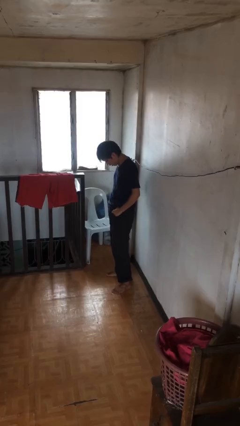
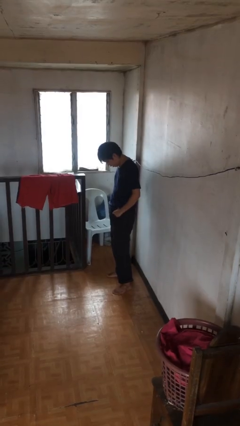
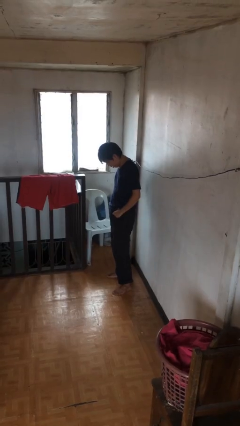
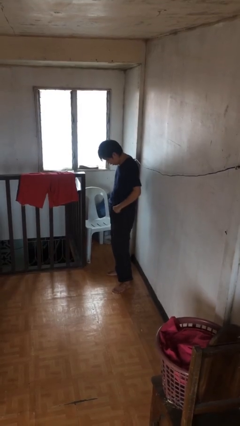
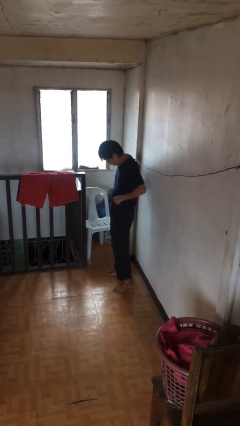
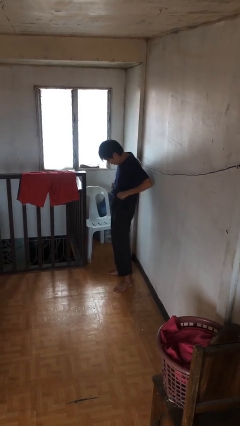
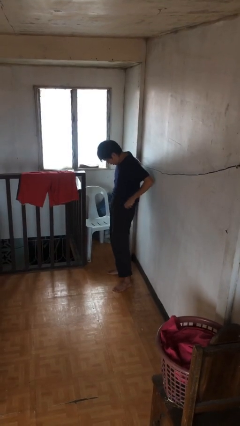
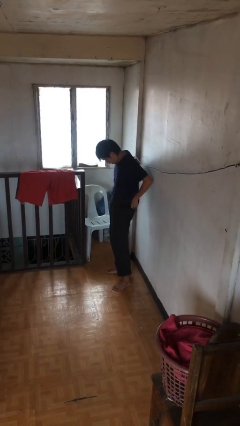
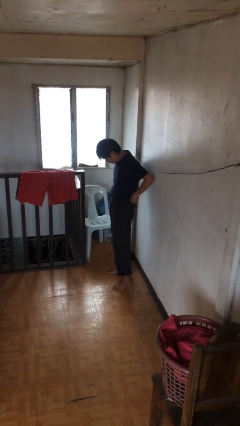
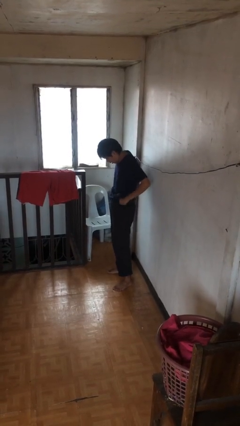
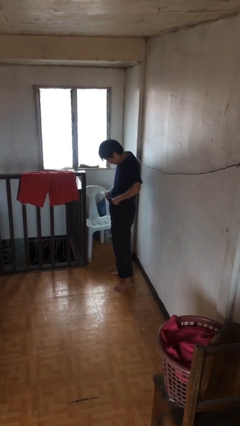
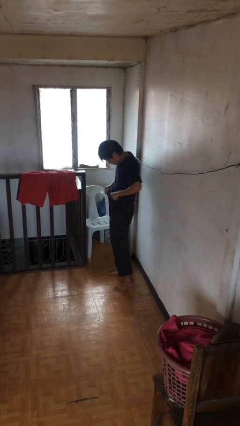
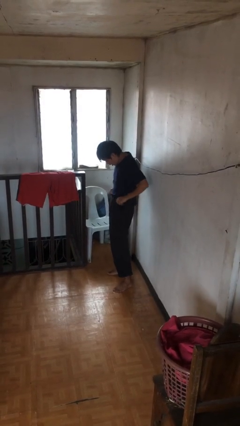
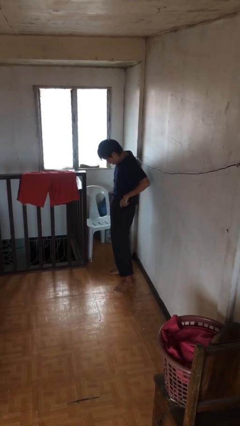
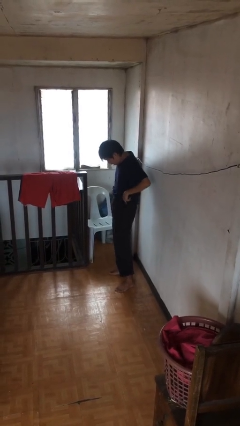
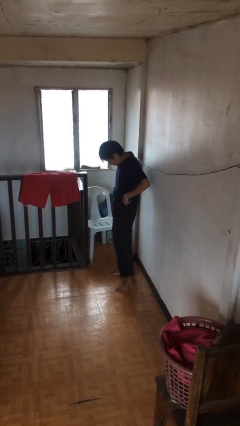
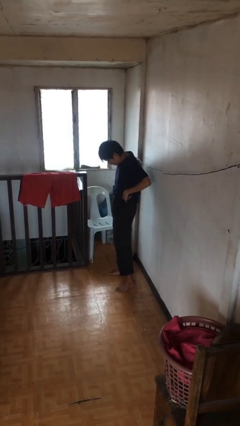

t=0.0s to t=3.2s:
person hikes up pants

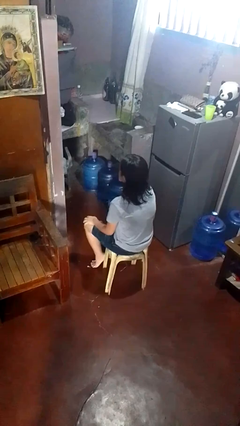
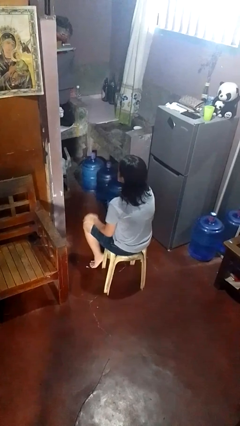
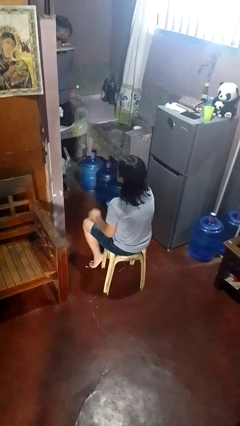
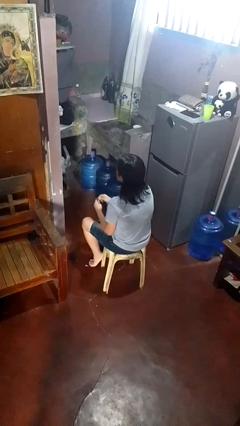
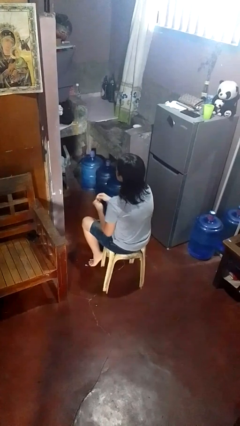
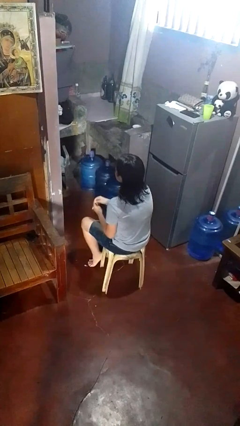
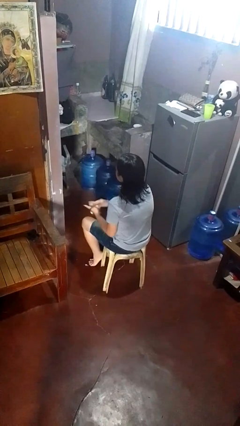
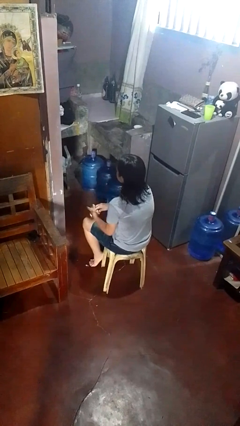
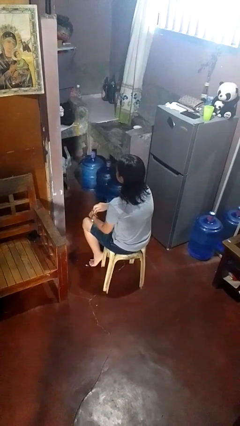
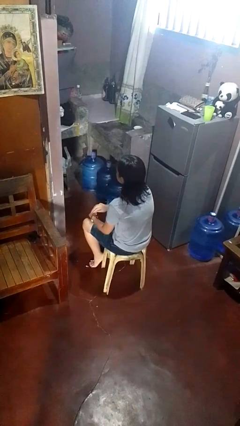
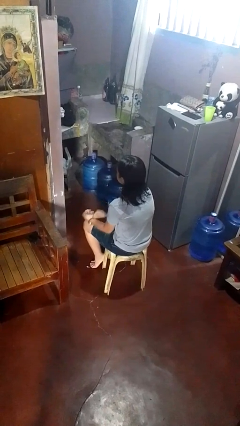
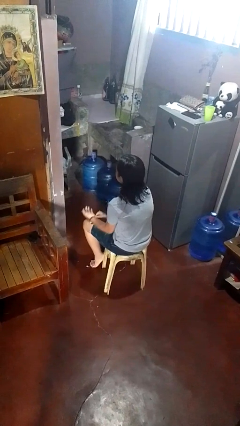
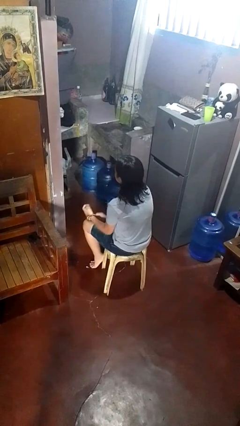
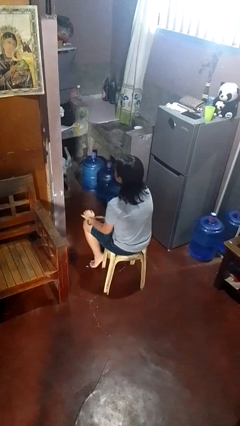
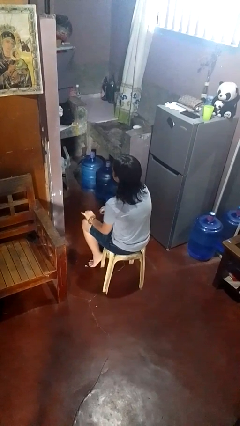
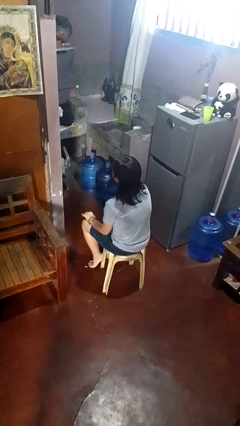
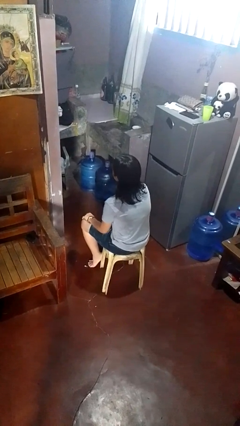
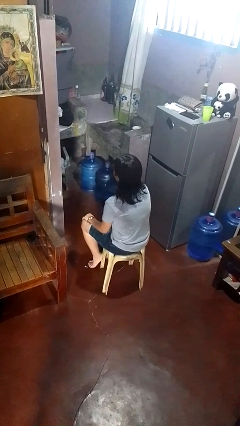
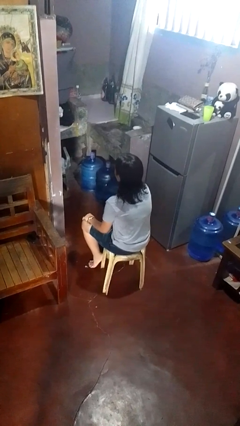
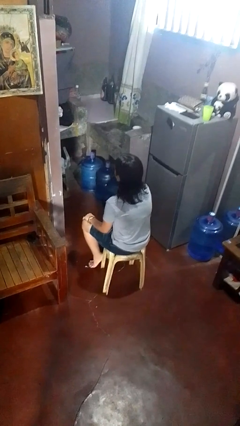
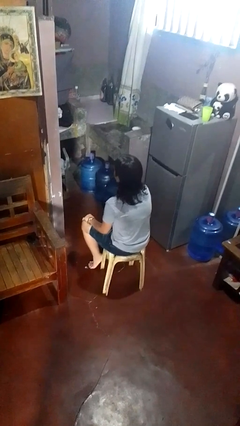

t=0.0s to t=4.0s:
person puts on wristwatch

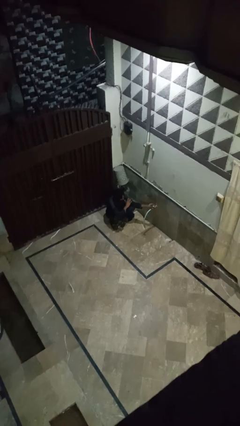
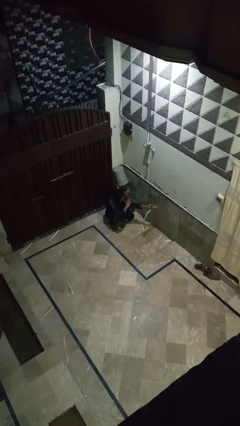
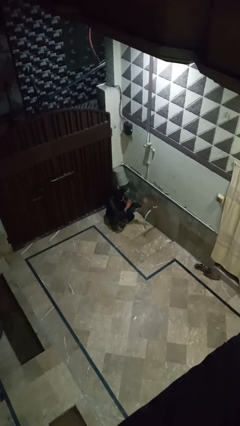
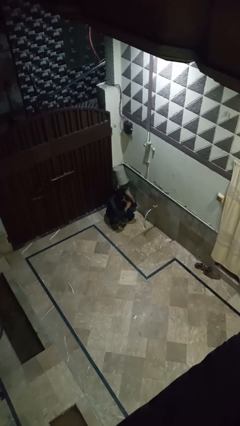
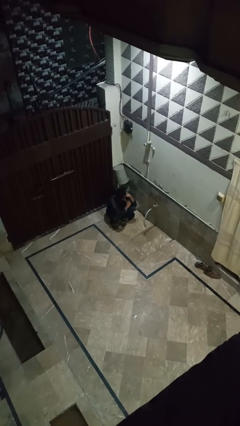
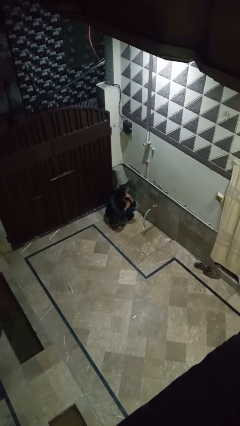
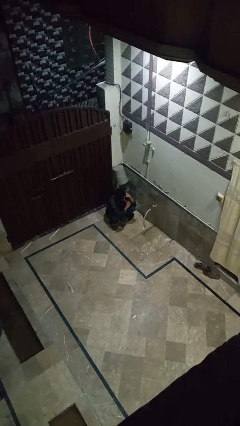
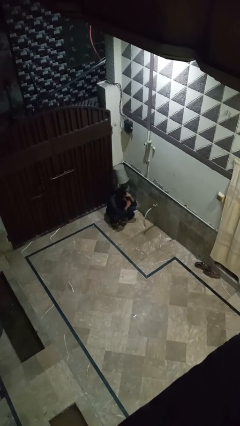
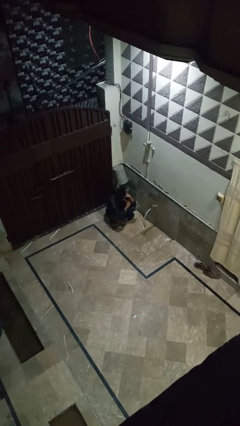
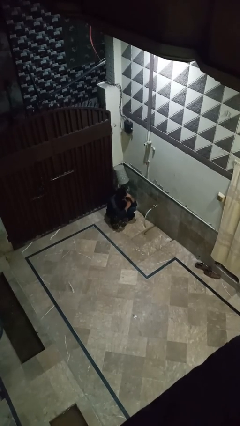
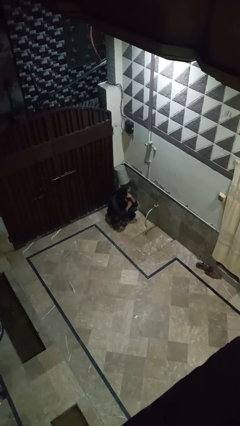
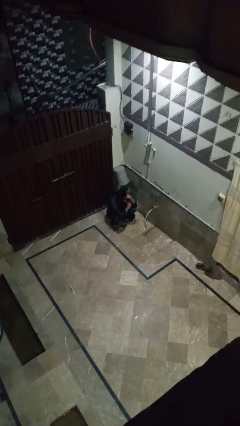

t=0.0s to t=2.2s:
person turns off faucet

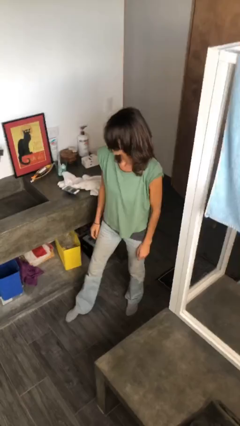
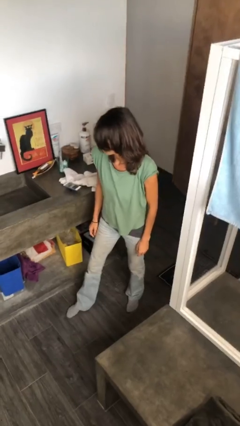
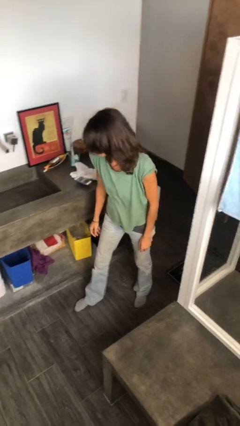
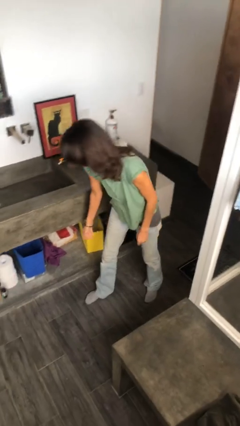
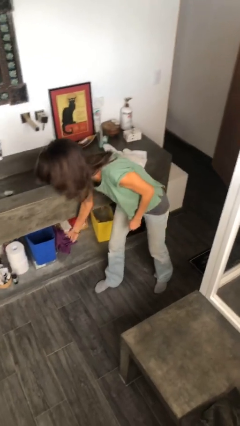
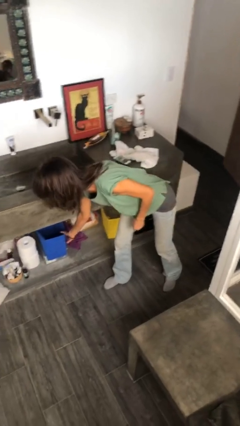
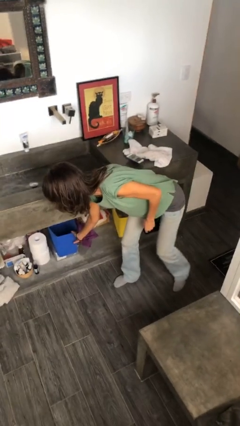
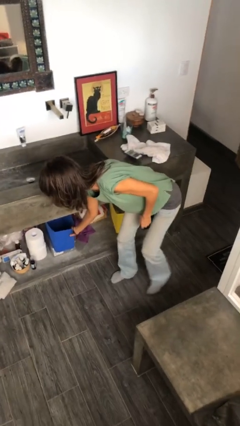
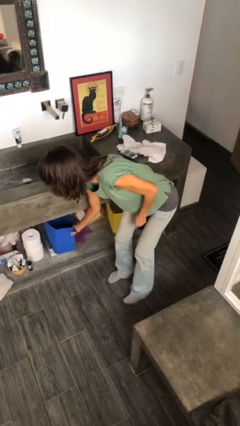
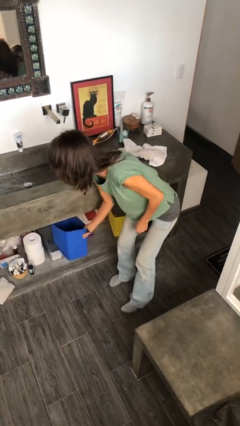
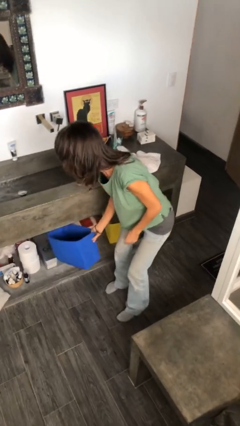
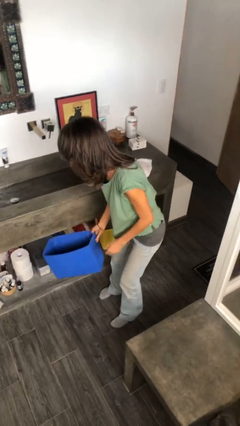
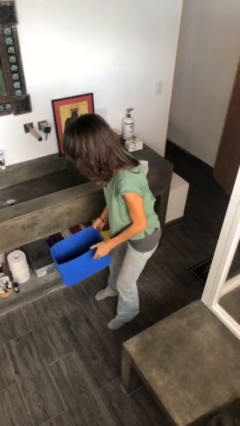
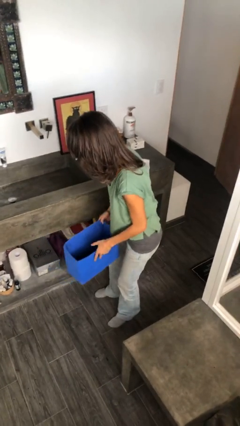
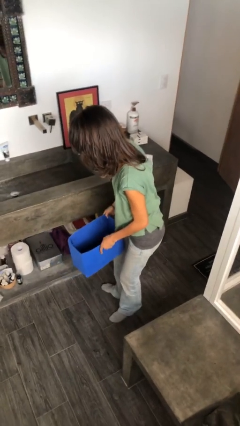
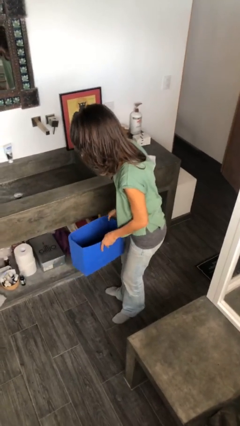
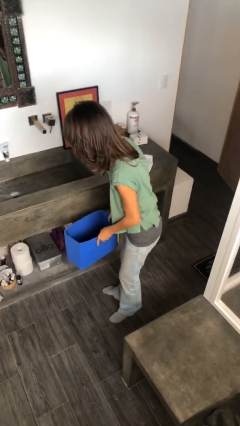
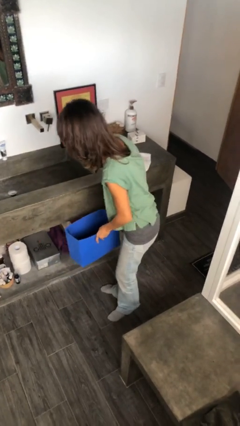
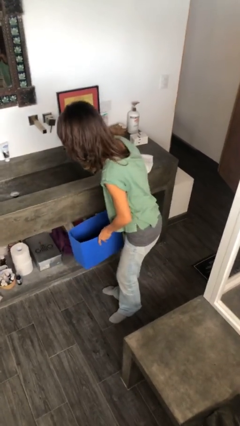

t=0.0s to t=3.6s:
person picks up object from cabinet

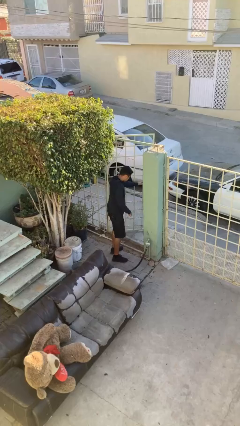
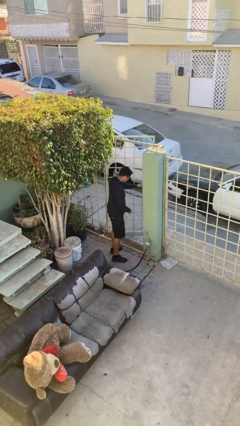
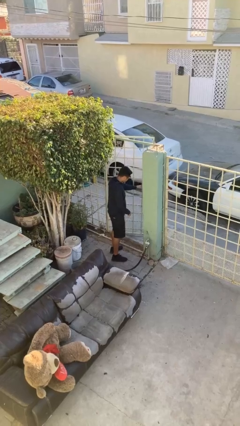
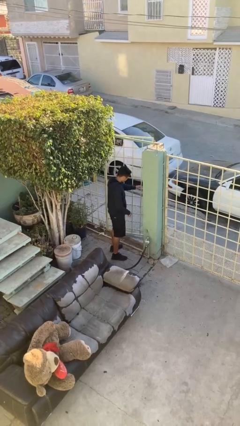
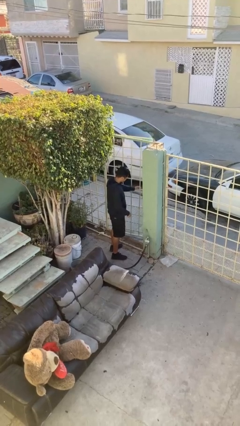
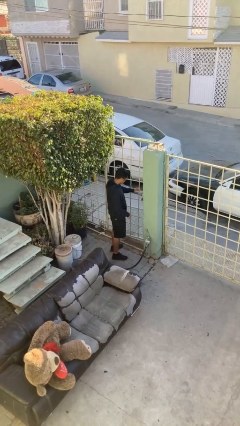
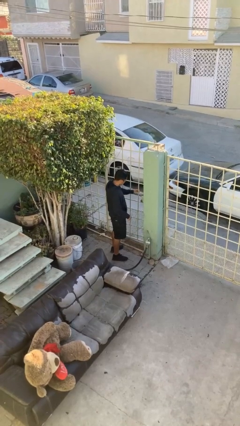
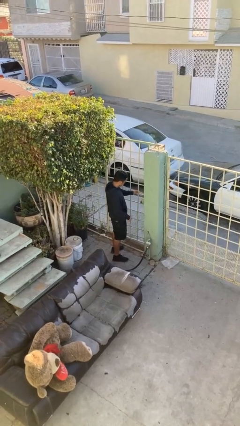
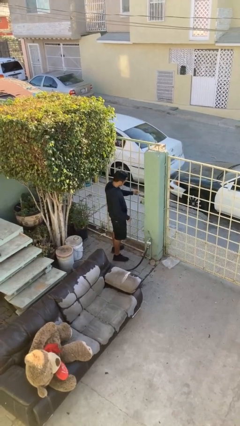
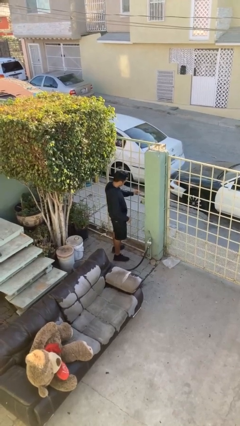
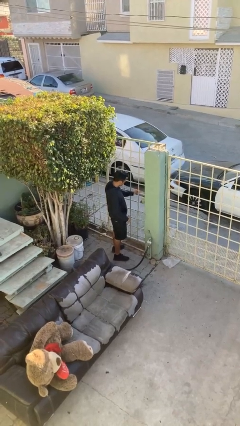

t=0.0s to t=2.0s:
person closes facility door

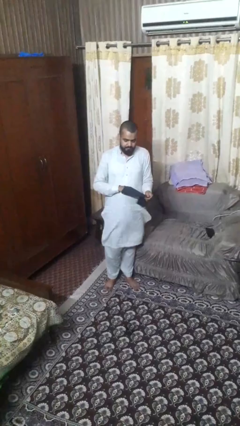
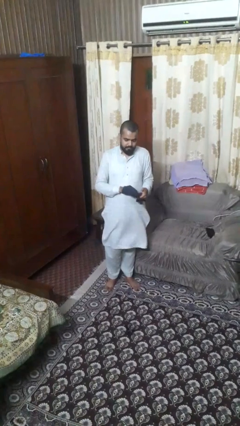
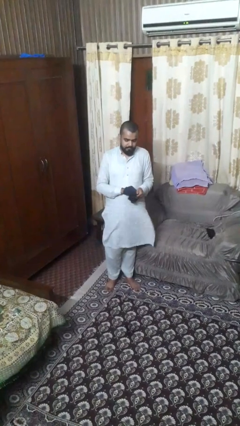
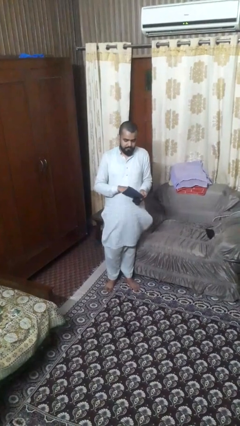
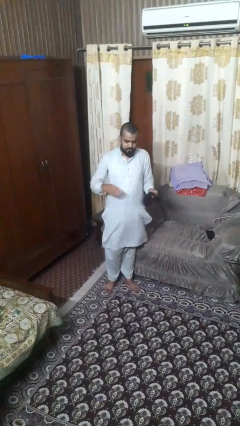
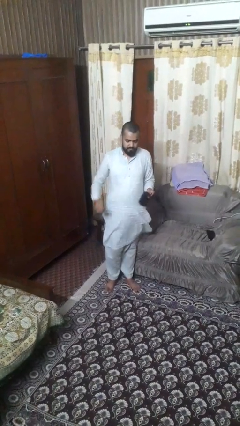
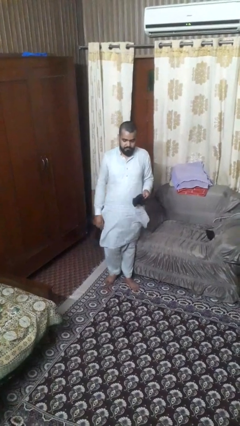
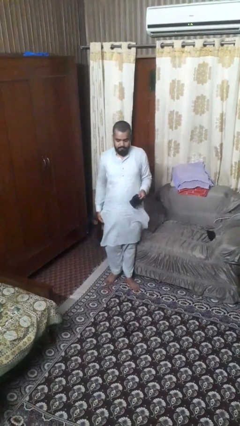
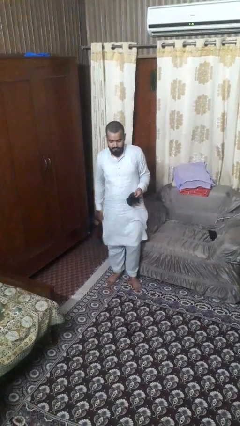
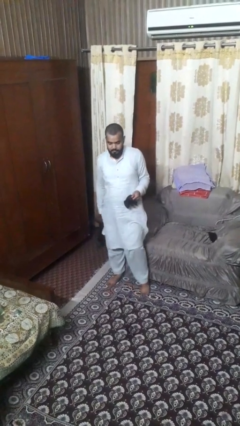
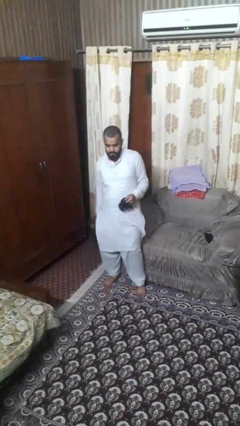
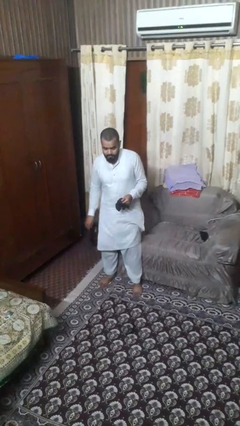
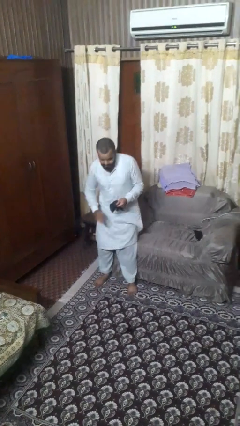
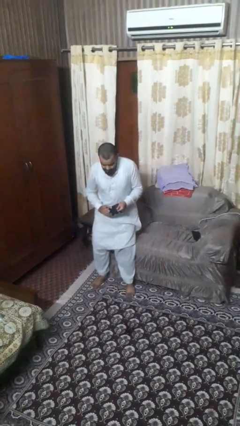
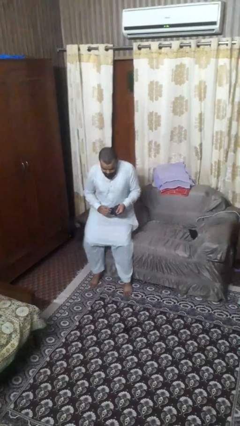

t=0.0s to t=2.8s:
person takes off gloves
